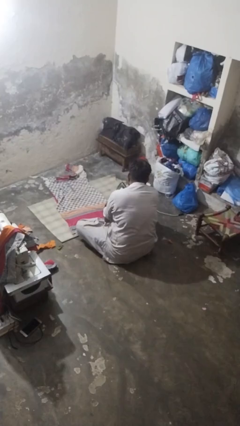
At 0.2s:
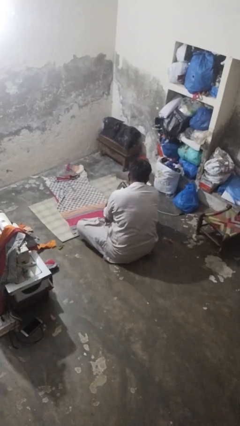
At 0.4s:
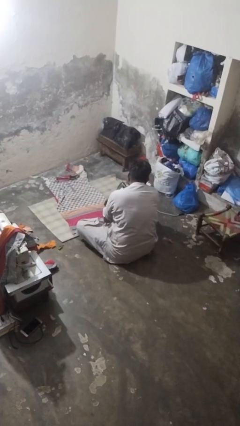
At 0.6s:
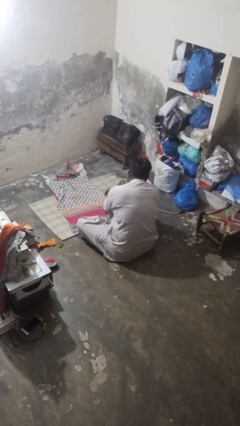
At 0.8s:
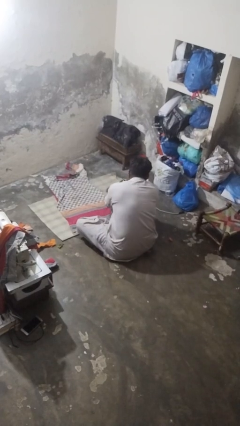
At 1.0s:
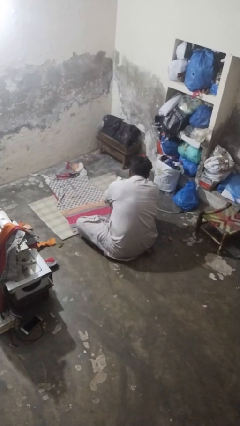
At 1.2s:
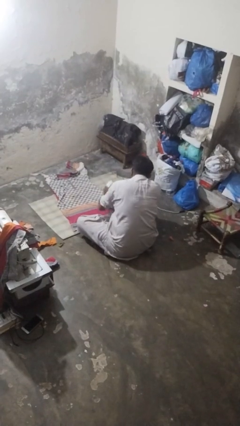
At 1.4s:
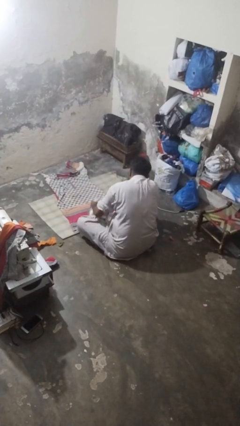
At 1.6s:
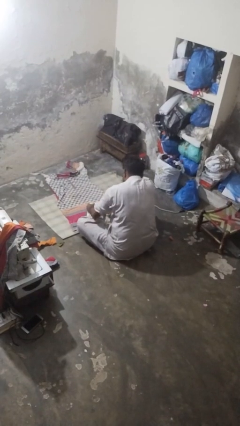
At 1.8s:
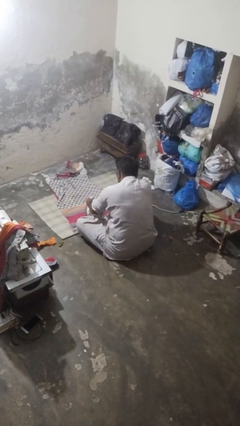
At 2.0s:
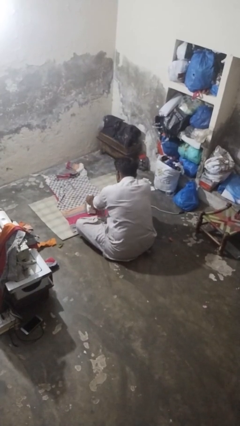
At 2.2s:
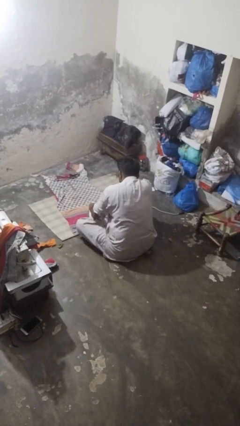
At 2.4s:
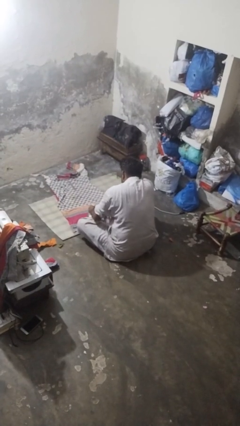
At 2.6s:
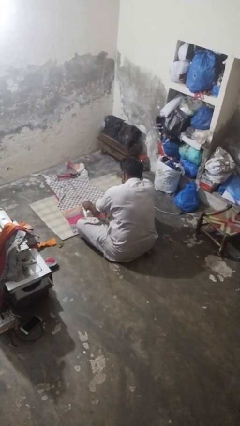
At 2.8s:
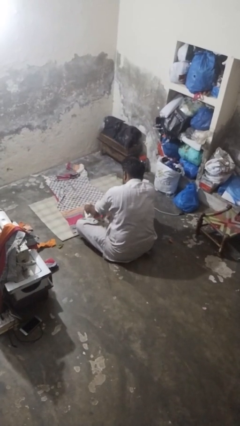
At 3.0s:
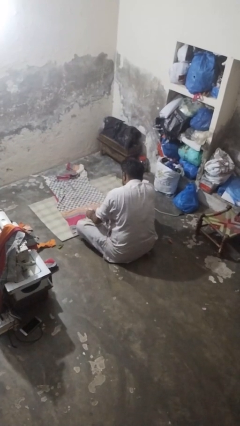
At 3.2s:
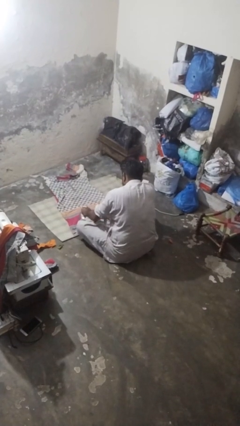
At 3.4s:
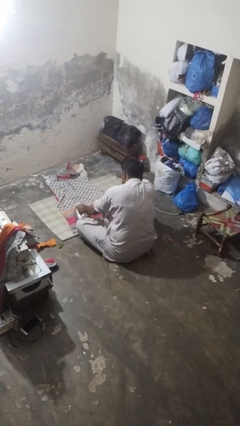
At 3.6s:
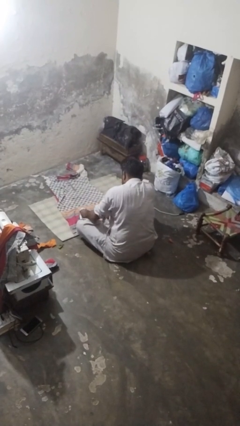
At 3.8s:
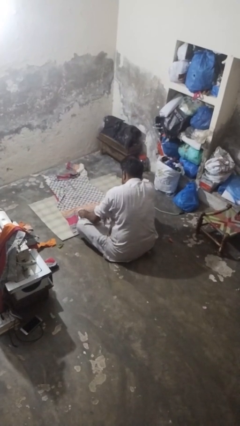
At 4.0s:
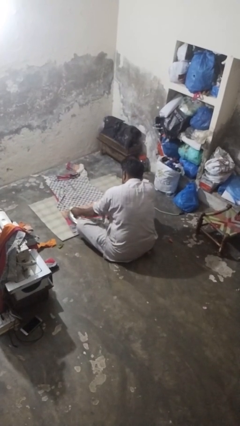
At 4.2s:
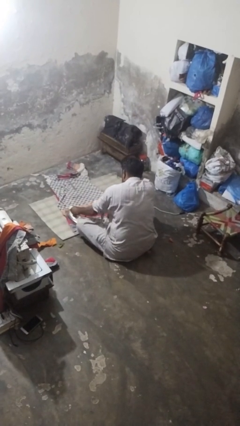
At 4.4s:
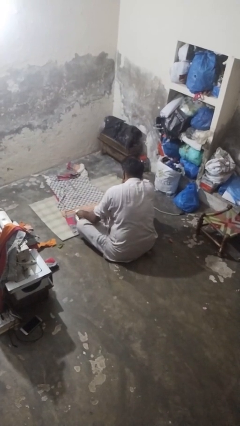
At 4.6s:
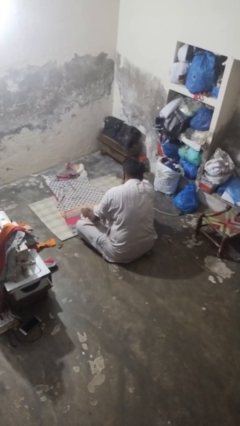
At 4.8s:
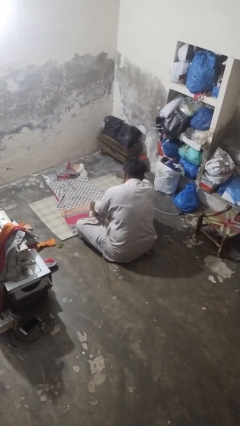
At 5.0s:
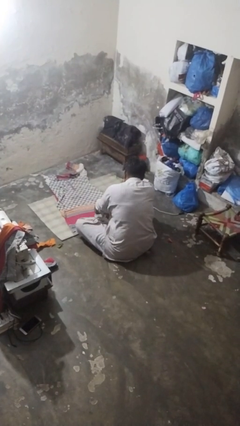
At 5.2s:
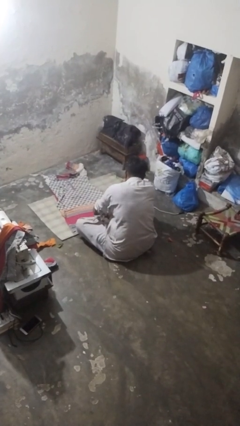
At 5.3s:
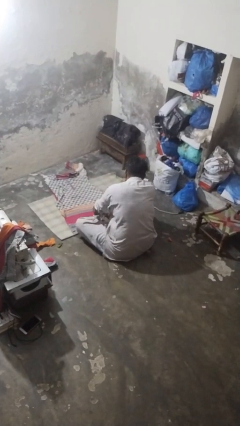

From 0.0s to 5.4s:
person irons clothes

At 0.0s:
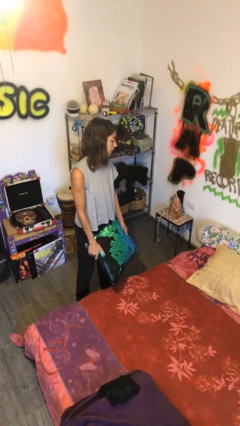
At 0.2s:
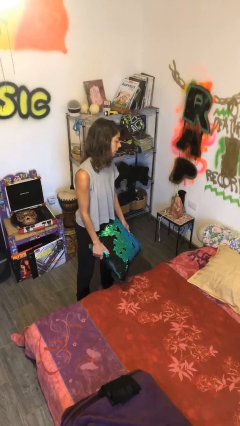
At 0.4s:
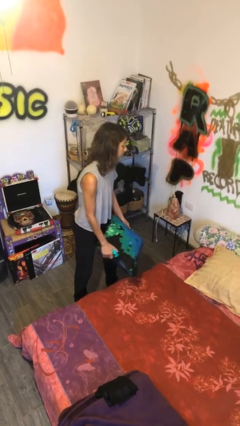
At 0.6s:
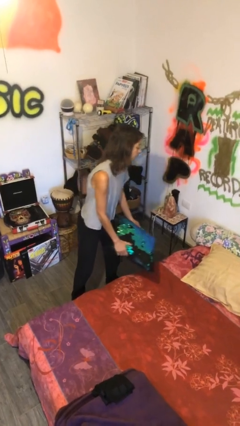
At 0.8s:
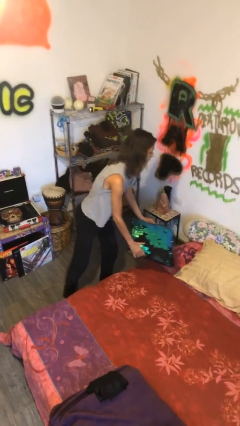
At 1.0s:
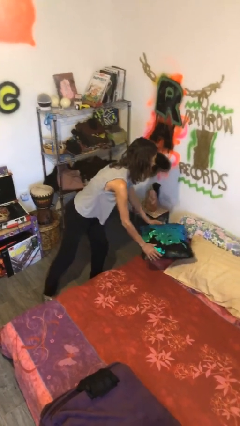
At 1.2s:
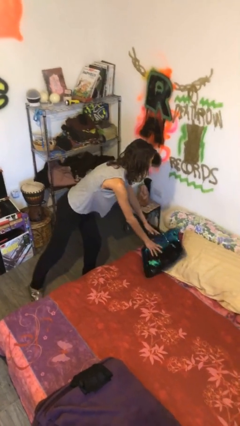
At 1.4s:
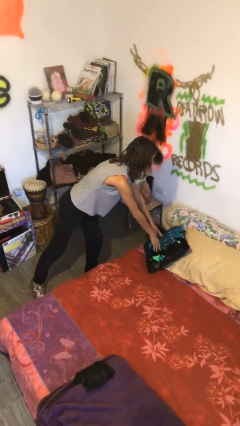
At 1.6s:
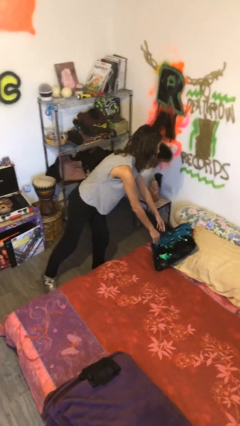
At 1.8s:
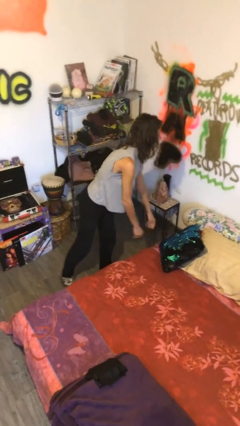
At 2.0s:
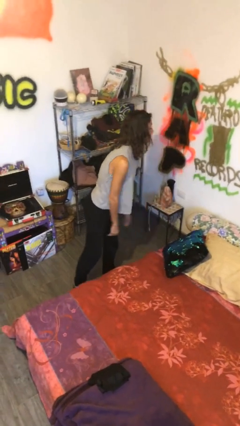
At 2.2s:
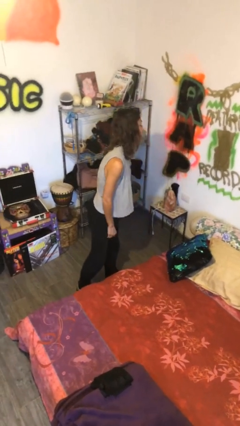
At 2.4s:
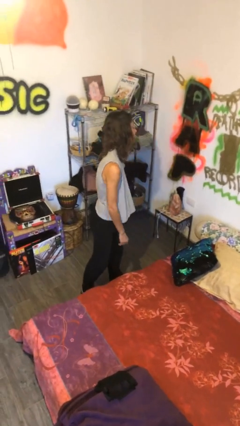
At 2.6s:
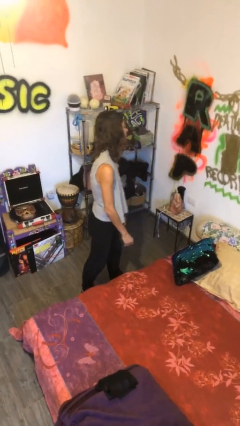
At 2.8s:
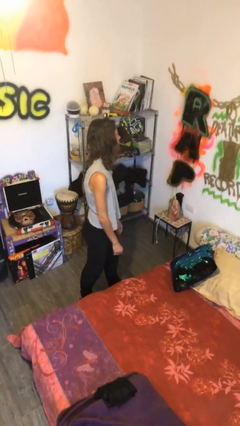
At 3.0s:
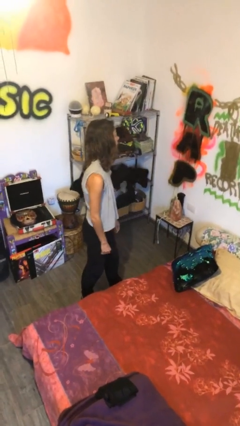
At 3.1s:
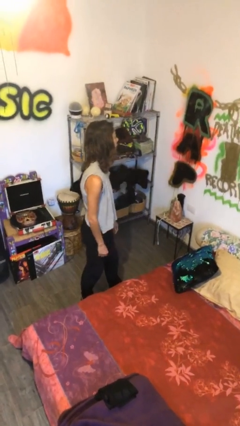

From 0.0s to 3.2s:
person puts down object on bed

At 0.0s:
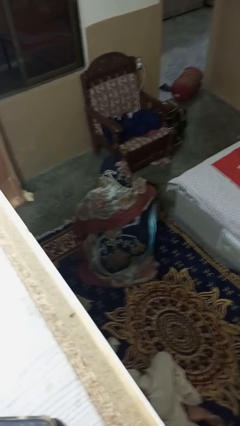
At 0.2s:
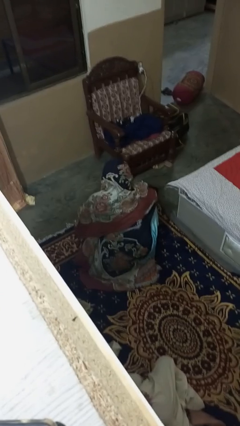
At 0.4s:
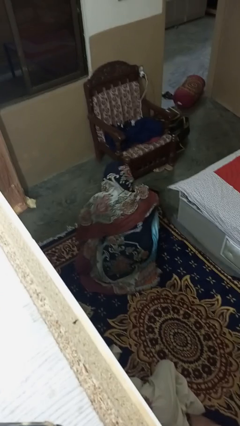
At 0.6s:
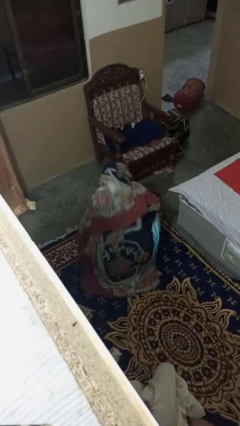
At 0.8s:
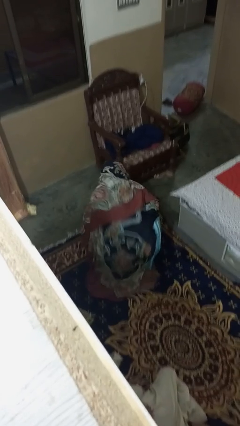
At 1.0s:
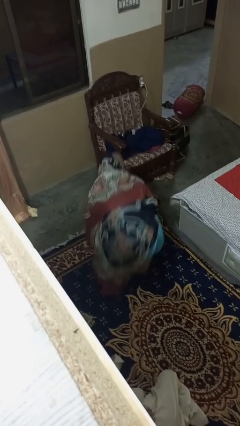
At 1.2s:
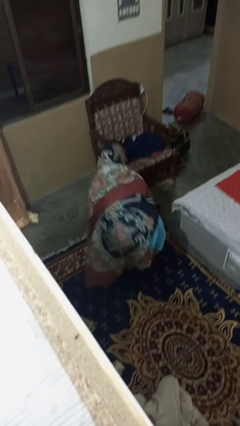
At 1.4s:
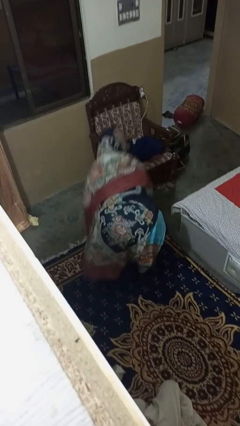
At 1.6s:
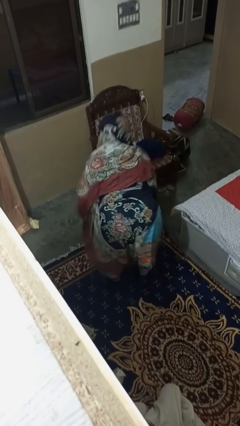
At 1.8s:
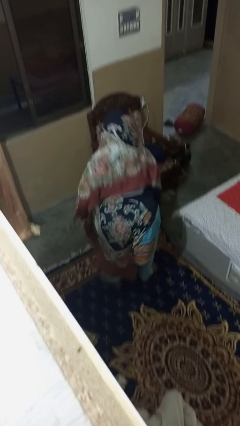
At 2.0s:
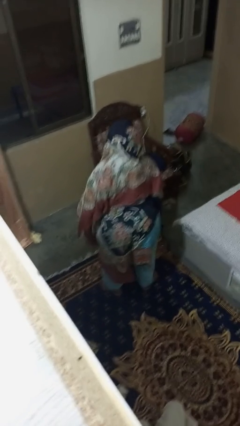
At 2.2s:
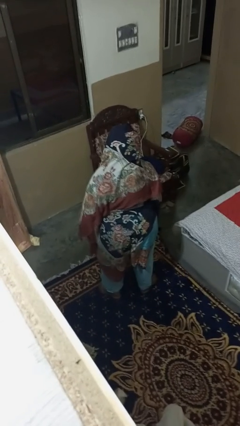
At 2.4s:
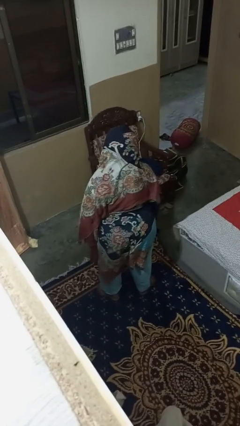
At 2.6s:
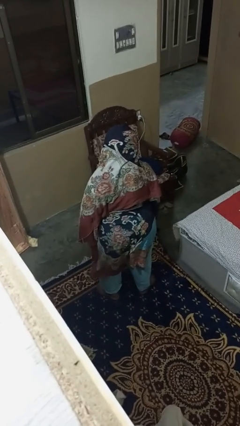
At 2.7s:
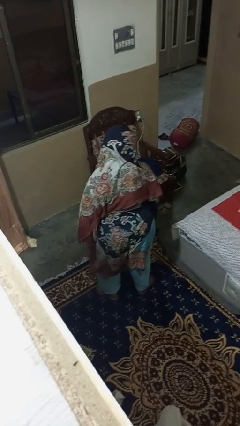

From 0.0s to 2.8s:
person stands up

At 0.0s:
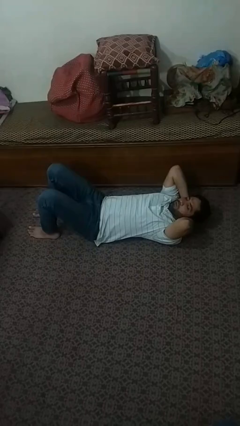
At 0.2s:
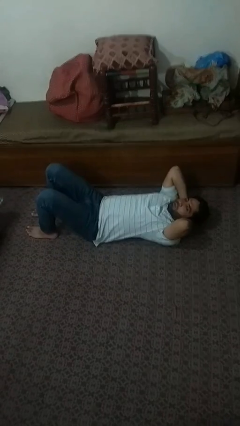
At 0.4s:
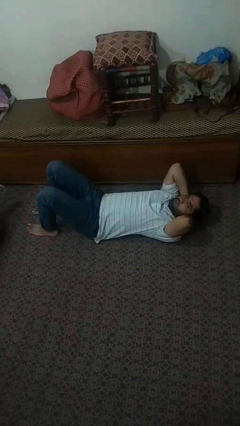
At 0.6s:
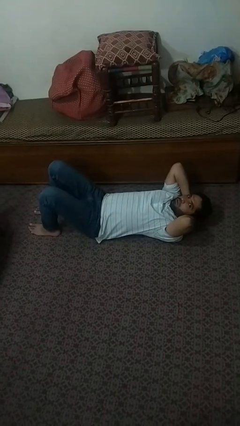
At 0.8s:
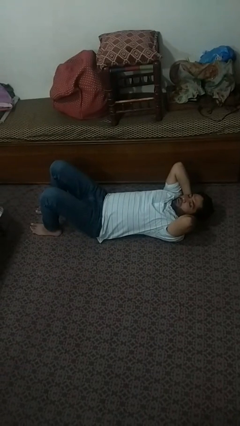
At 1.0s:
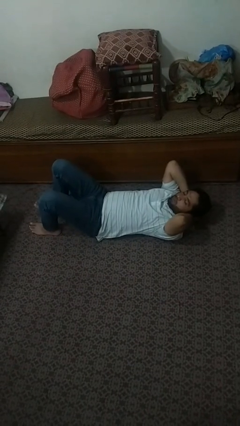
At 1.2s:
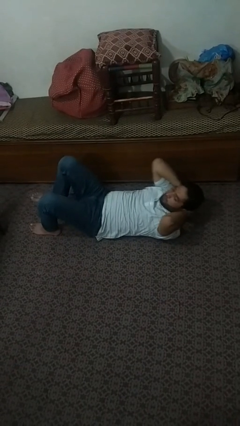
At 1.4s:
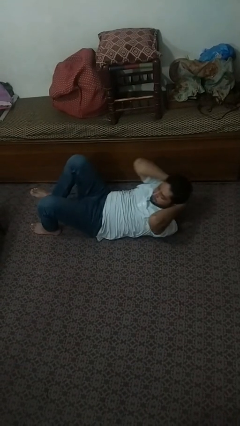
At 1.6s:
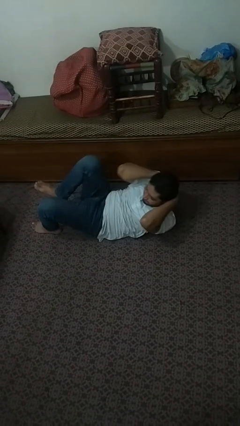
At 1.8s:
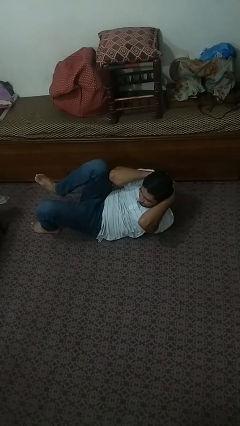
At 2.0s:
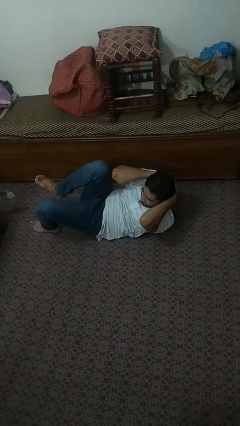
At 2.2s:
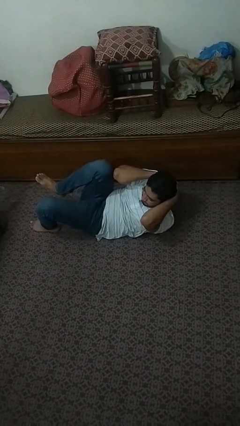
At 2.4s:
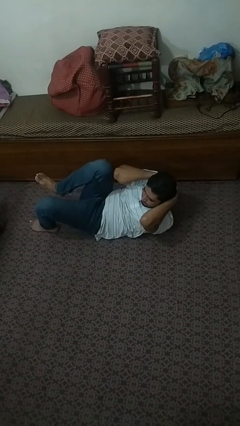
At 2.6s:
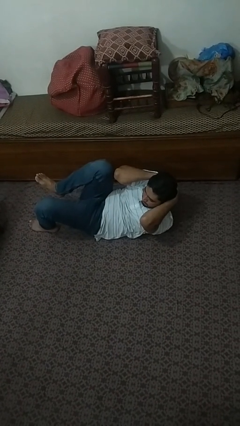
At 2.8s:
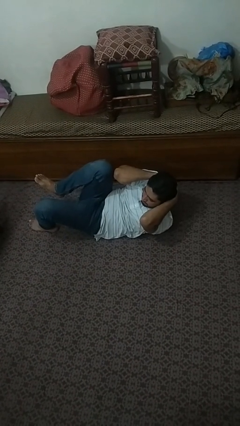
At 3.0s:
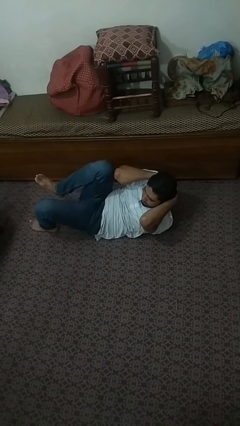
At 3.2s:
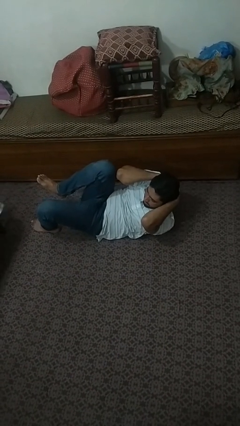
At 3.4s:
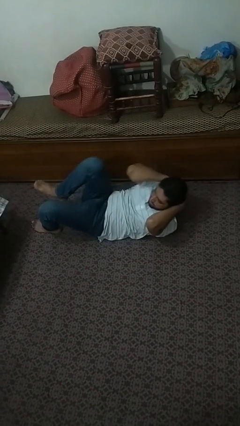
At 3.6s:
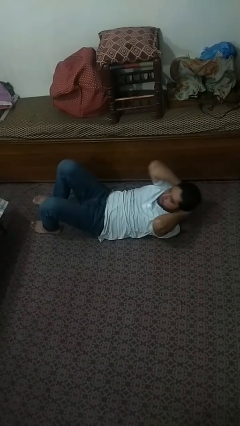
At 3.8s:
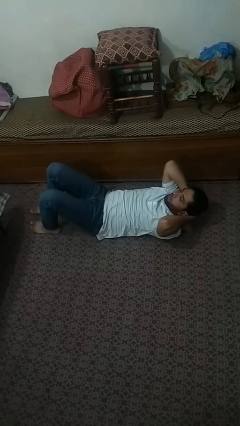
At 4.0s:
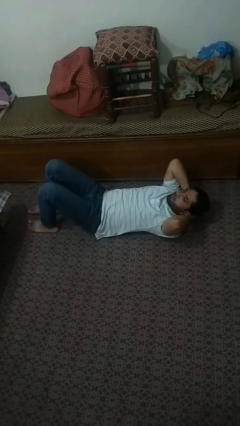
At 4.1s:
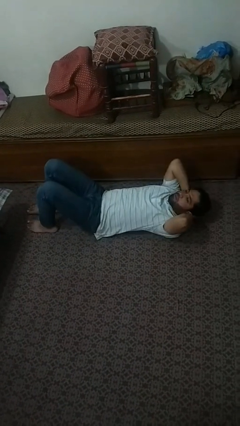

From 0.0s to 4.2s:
person exercises with situp

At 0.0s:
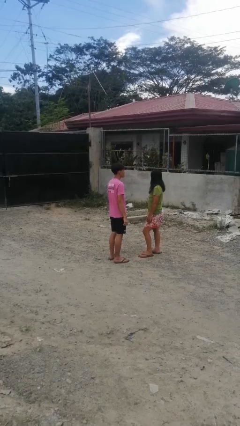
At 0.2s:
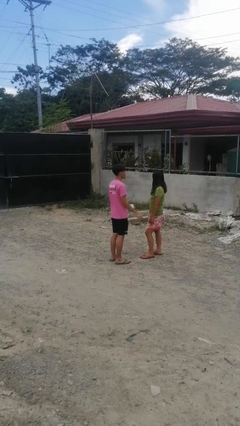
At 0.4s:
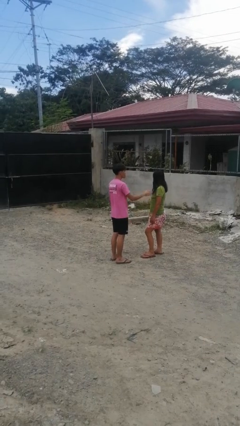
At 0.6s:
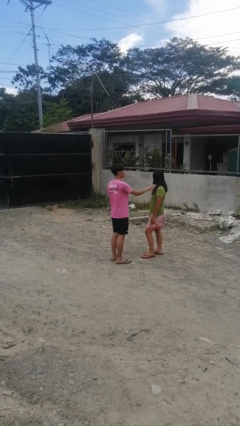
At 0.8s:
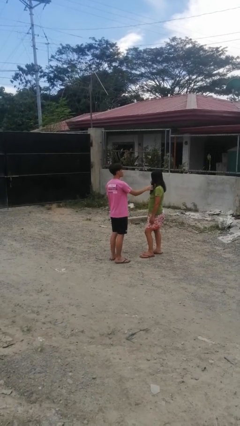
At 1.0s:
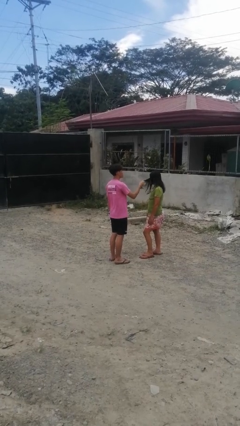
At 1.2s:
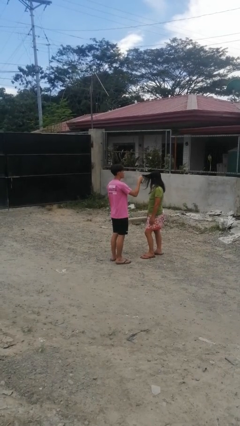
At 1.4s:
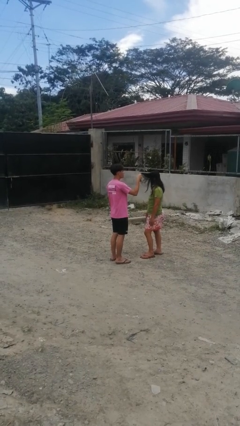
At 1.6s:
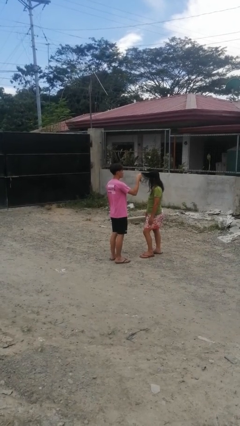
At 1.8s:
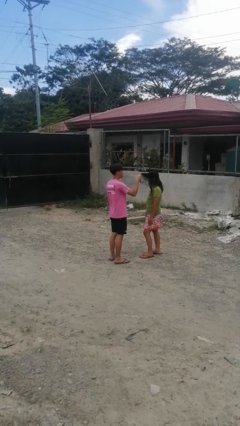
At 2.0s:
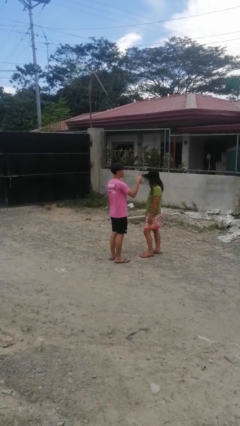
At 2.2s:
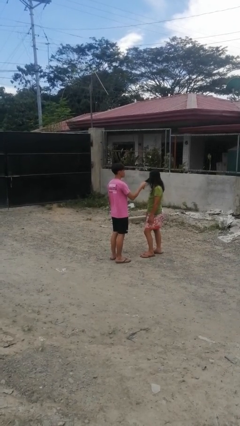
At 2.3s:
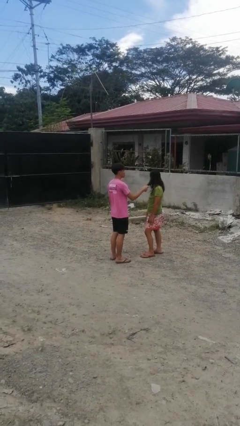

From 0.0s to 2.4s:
person grabs person by hair
